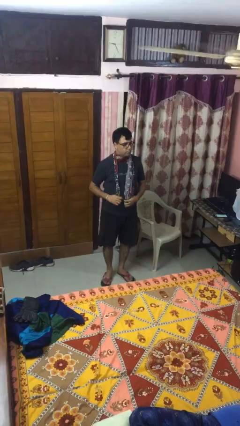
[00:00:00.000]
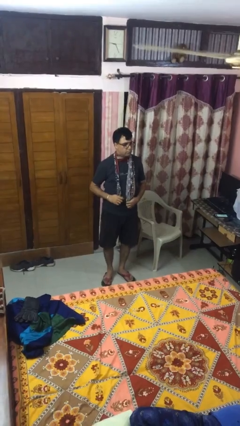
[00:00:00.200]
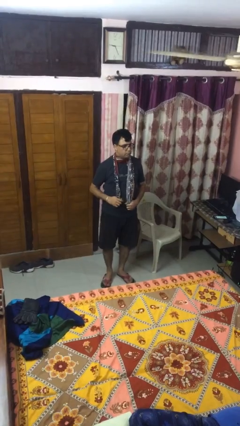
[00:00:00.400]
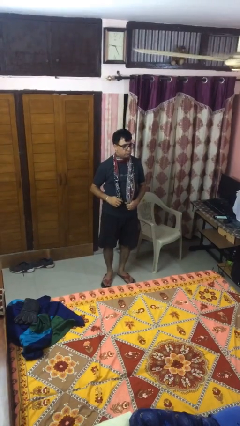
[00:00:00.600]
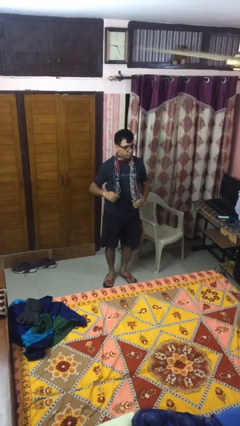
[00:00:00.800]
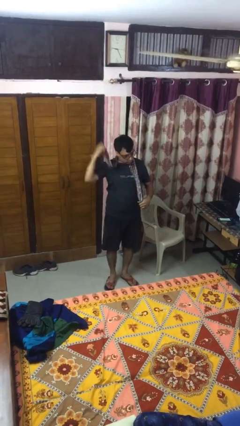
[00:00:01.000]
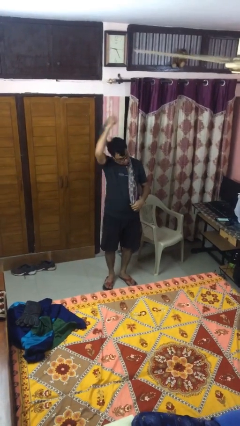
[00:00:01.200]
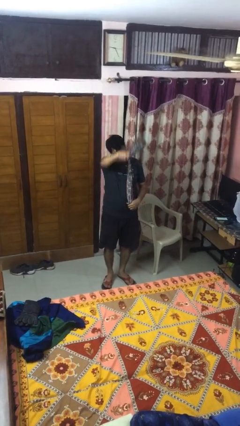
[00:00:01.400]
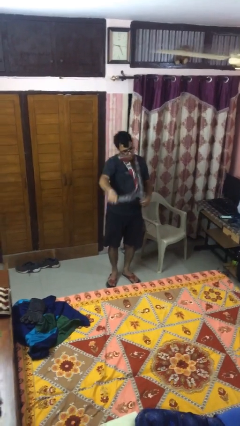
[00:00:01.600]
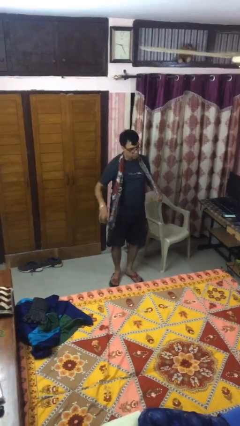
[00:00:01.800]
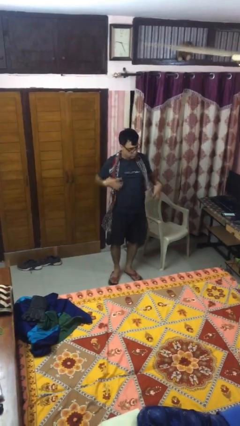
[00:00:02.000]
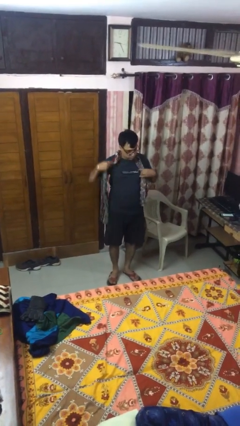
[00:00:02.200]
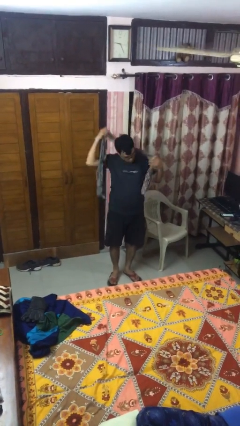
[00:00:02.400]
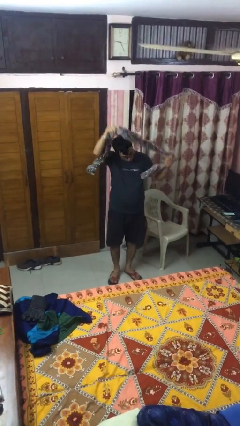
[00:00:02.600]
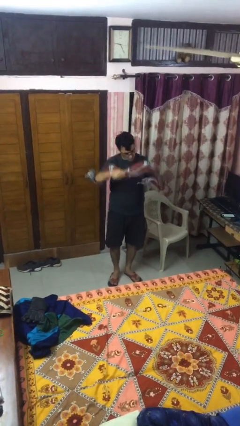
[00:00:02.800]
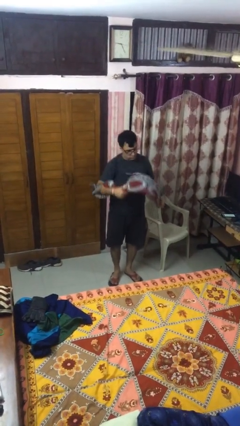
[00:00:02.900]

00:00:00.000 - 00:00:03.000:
person takes off scarf

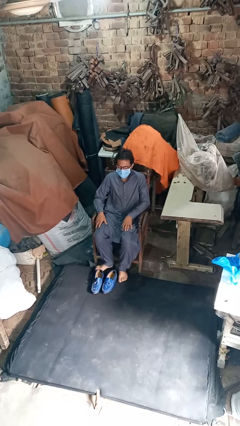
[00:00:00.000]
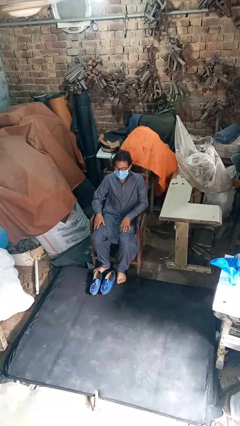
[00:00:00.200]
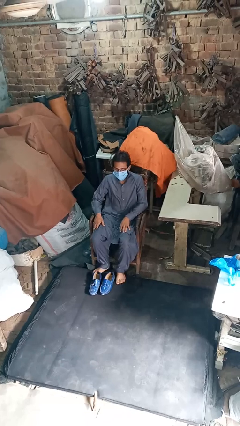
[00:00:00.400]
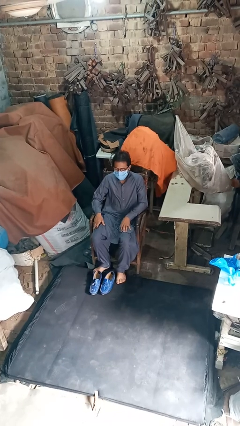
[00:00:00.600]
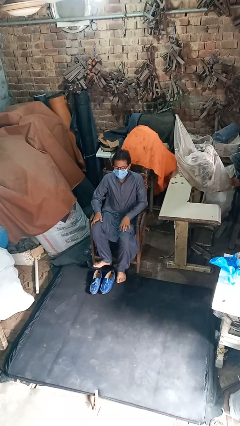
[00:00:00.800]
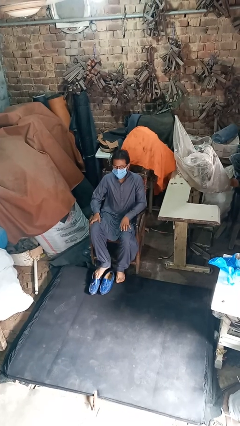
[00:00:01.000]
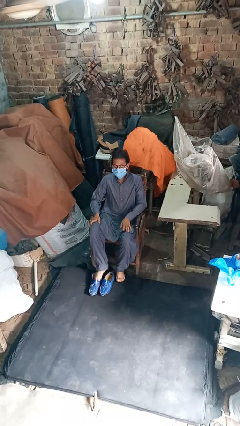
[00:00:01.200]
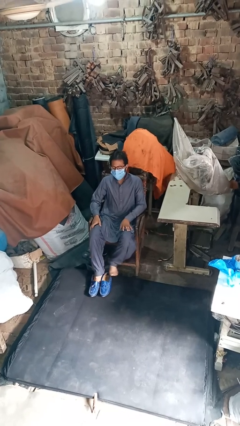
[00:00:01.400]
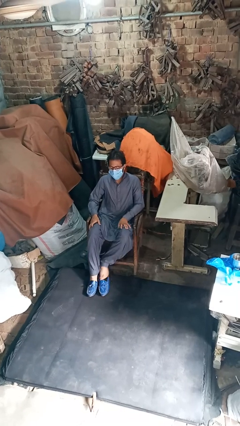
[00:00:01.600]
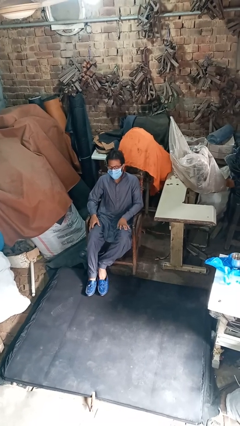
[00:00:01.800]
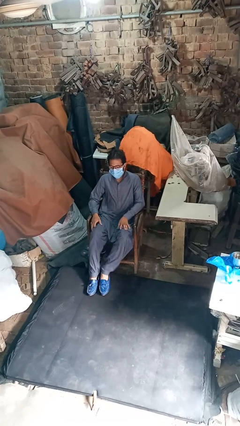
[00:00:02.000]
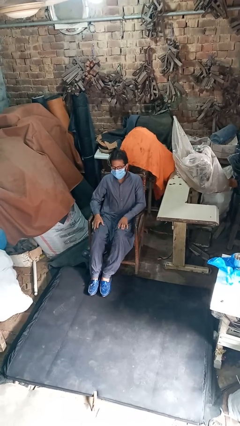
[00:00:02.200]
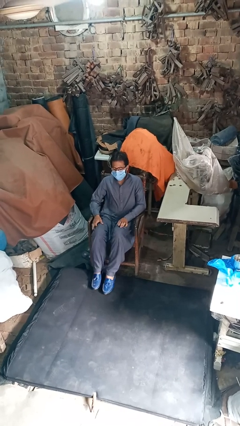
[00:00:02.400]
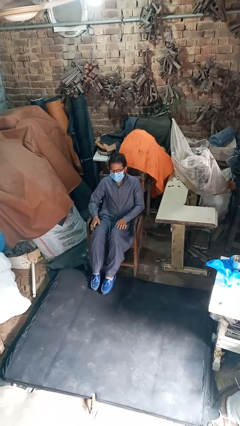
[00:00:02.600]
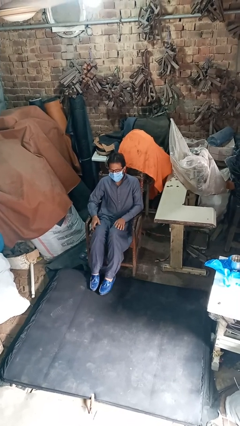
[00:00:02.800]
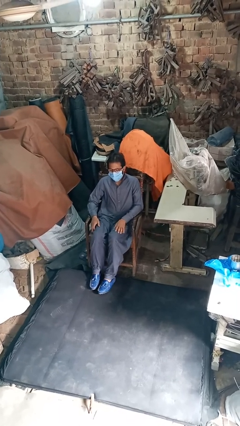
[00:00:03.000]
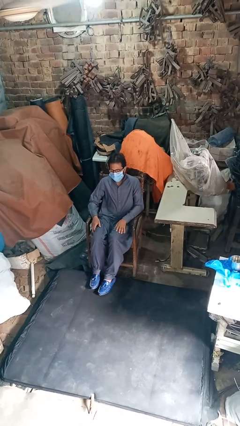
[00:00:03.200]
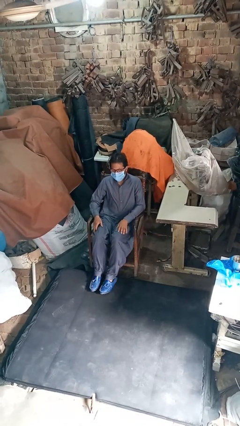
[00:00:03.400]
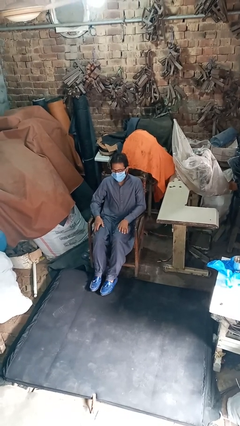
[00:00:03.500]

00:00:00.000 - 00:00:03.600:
person puts on shoes

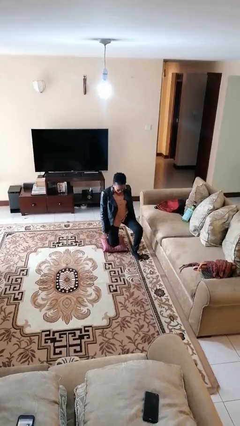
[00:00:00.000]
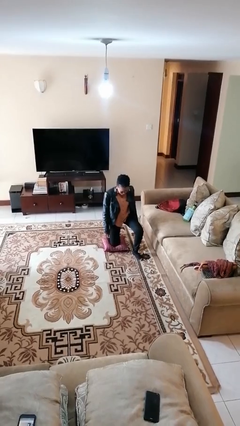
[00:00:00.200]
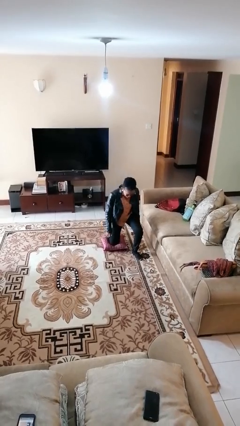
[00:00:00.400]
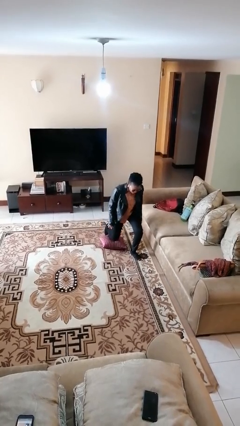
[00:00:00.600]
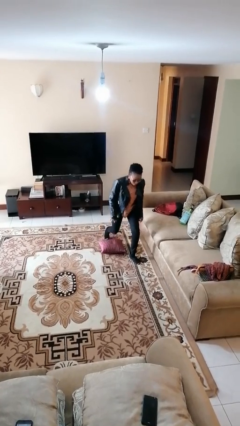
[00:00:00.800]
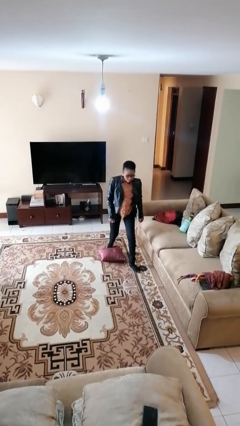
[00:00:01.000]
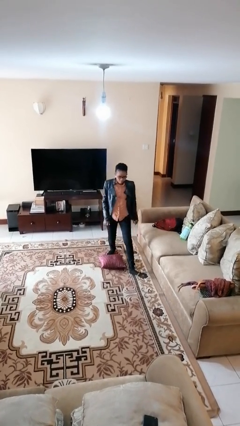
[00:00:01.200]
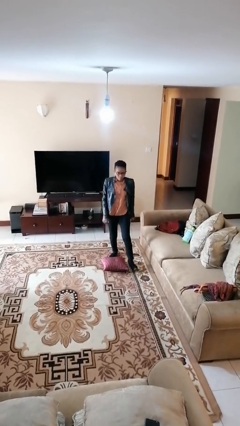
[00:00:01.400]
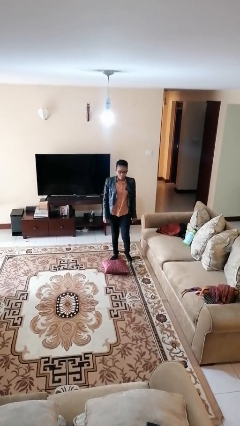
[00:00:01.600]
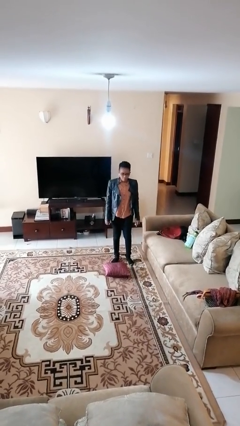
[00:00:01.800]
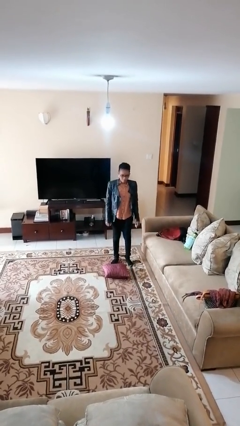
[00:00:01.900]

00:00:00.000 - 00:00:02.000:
person stands up from floor

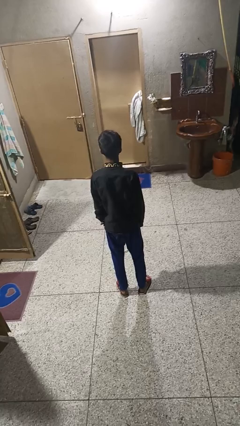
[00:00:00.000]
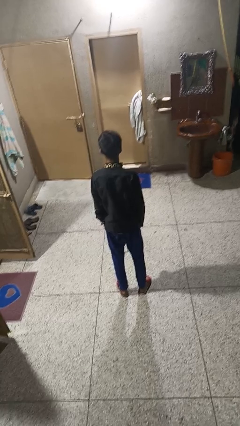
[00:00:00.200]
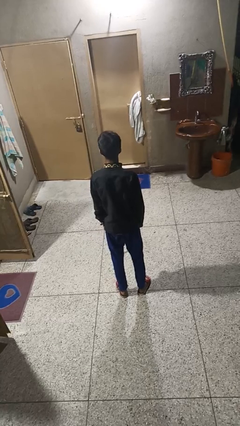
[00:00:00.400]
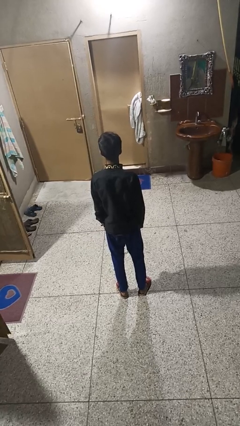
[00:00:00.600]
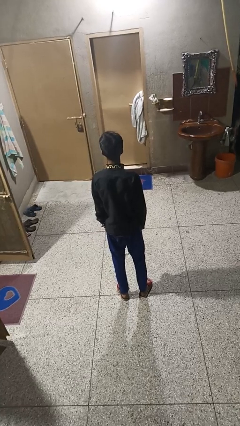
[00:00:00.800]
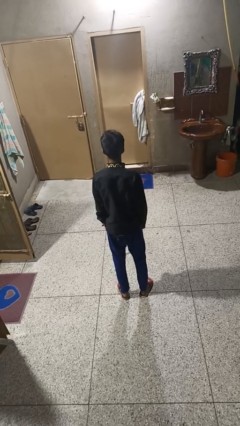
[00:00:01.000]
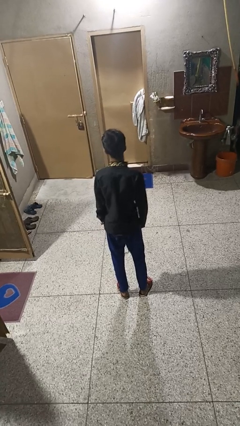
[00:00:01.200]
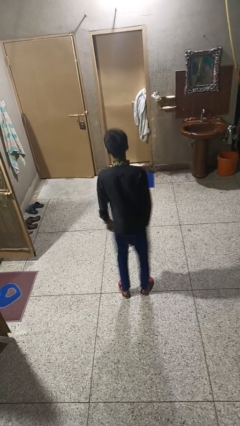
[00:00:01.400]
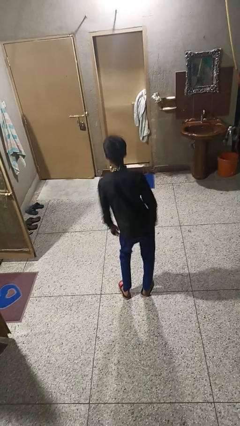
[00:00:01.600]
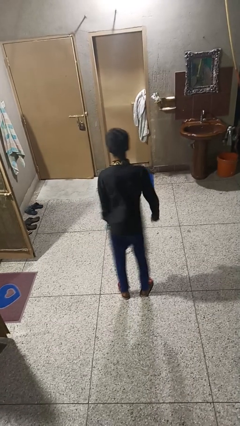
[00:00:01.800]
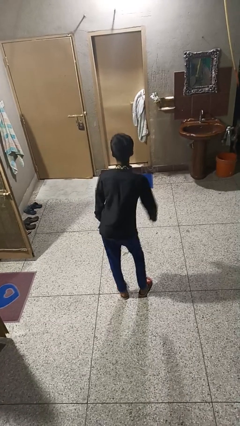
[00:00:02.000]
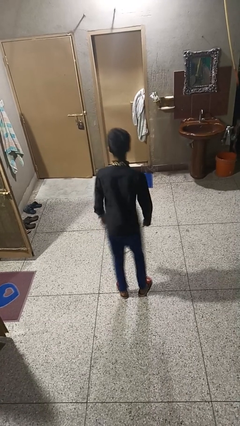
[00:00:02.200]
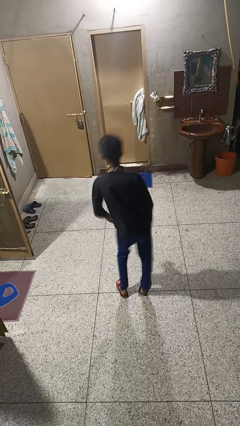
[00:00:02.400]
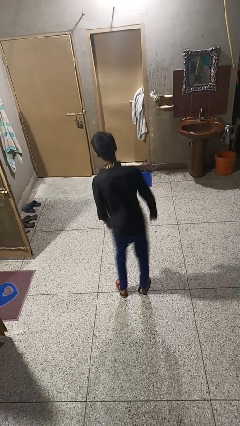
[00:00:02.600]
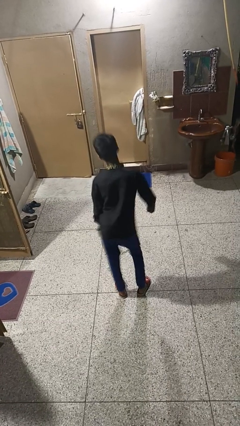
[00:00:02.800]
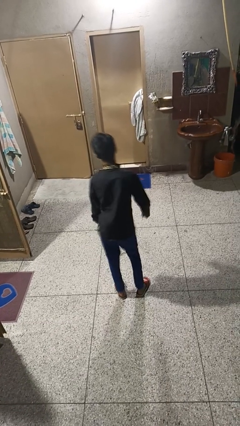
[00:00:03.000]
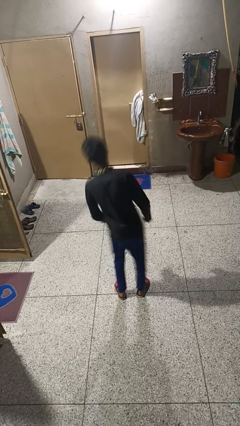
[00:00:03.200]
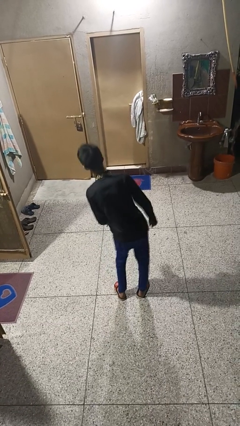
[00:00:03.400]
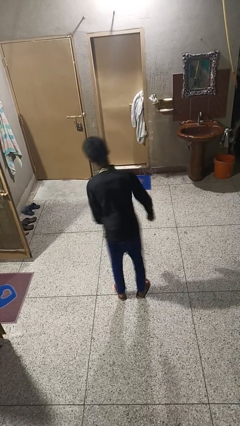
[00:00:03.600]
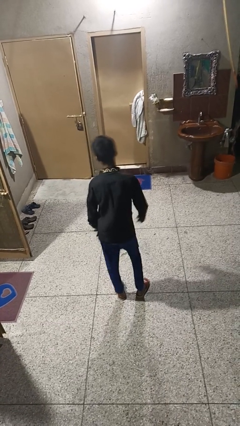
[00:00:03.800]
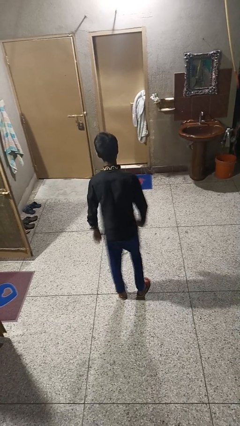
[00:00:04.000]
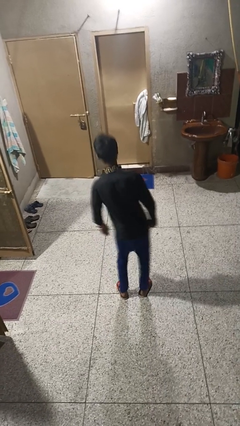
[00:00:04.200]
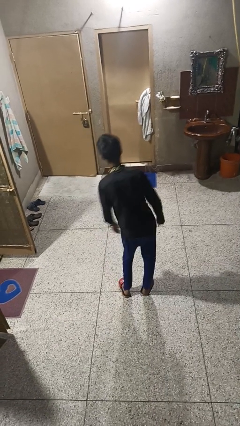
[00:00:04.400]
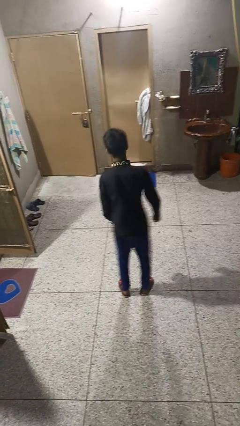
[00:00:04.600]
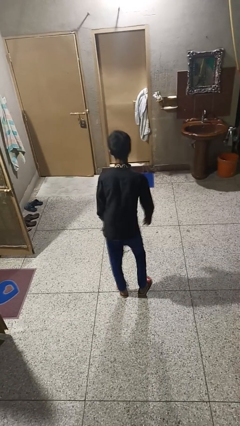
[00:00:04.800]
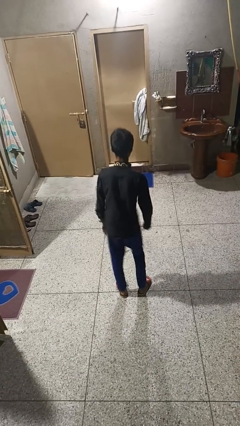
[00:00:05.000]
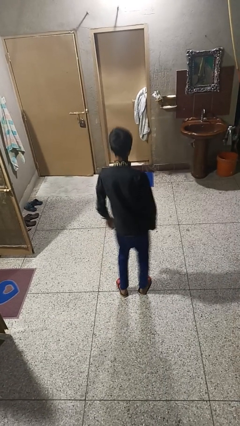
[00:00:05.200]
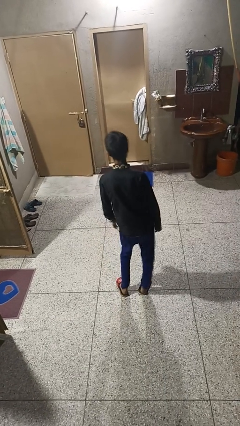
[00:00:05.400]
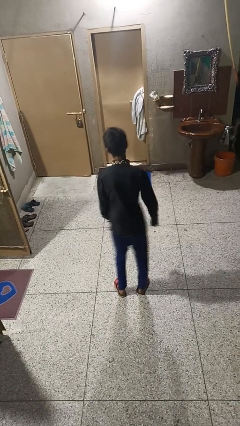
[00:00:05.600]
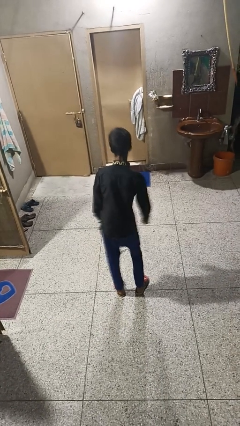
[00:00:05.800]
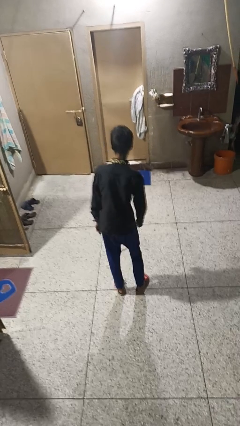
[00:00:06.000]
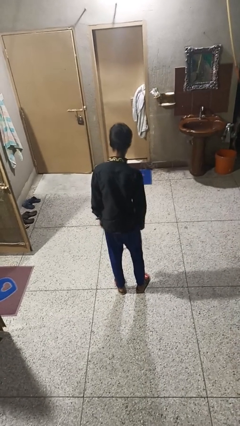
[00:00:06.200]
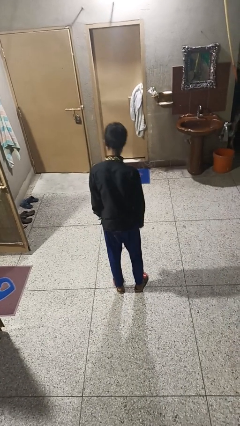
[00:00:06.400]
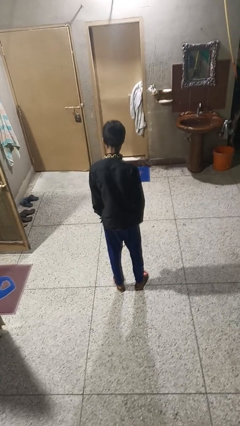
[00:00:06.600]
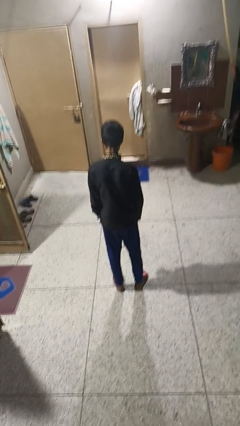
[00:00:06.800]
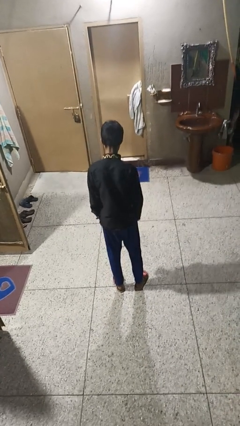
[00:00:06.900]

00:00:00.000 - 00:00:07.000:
person wiggles hips

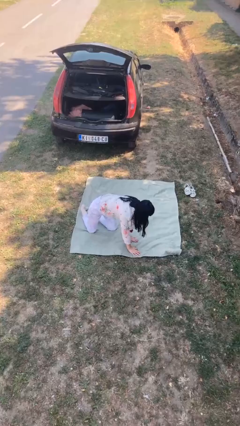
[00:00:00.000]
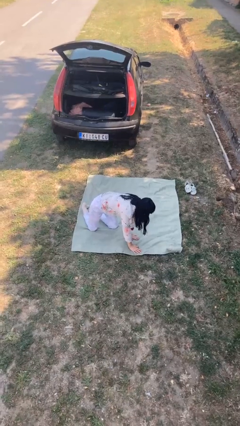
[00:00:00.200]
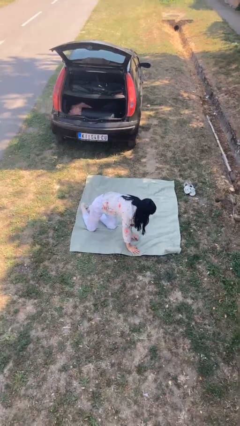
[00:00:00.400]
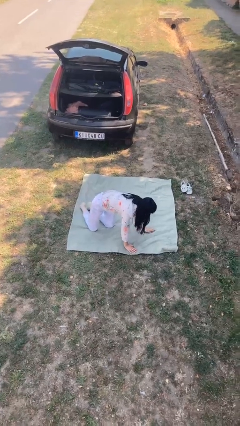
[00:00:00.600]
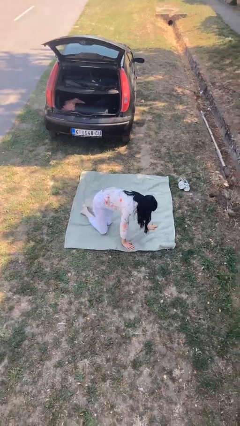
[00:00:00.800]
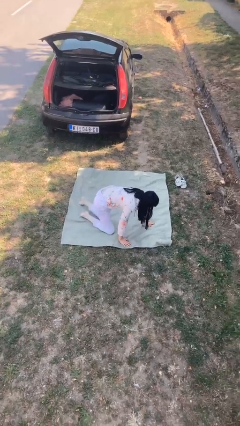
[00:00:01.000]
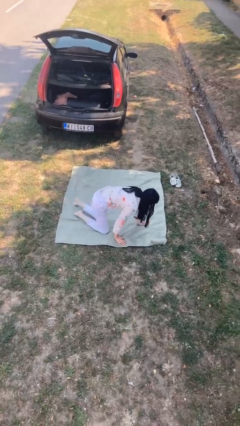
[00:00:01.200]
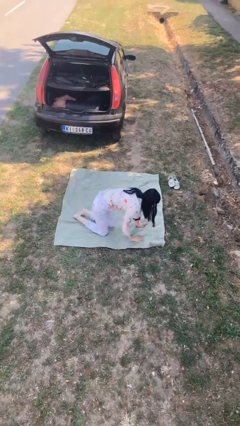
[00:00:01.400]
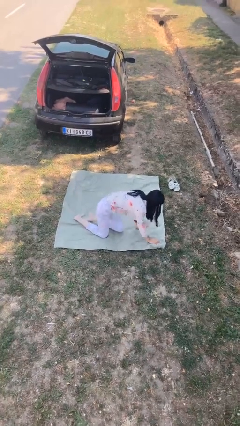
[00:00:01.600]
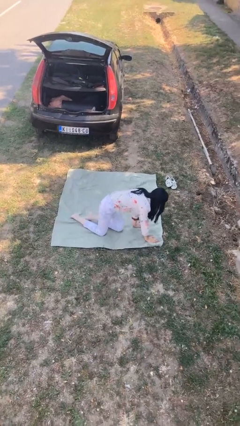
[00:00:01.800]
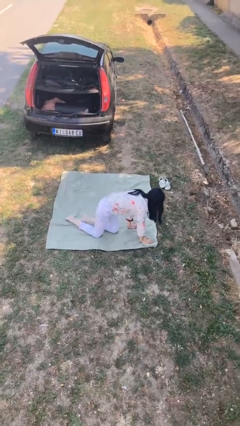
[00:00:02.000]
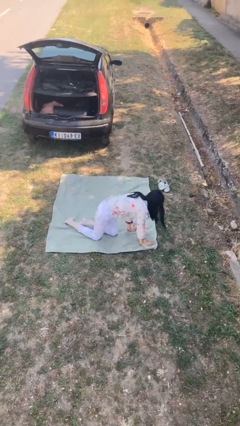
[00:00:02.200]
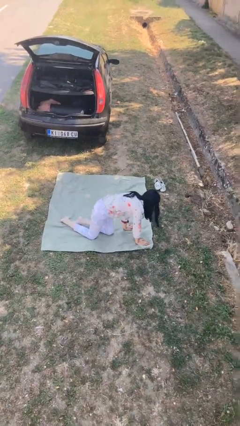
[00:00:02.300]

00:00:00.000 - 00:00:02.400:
person crawls
